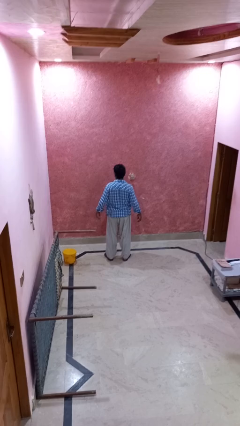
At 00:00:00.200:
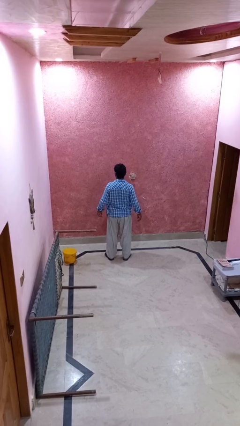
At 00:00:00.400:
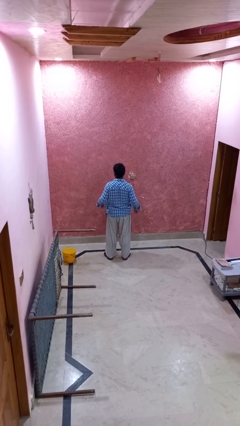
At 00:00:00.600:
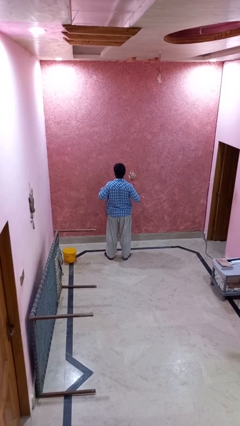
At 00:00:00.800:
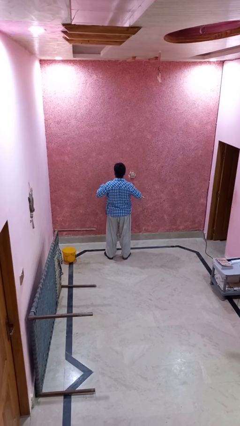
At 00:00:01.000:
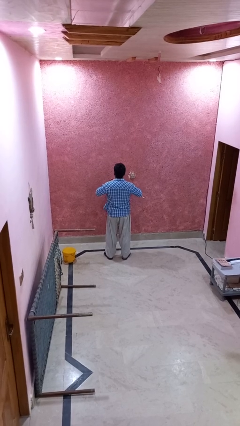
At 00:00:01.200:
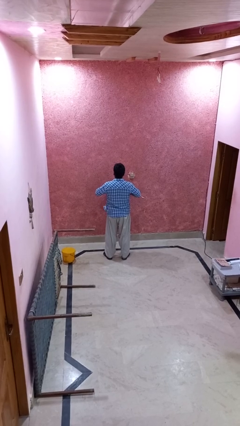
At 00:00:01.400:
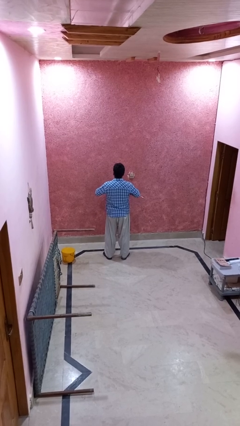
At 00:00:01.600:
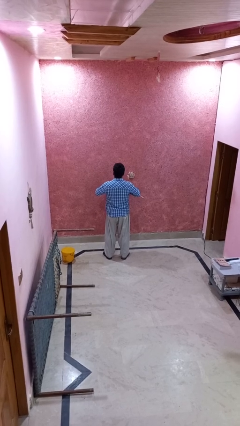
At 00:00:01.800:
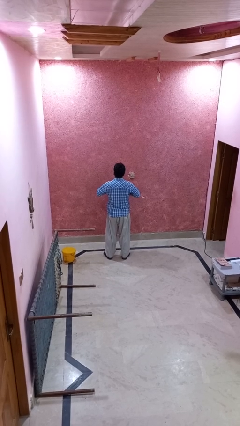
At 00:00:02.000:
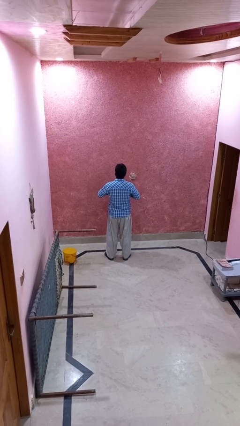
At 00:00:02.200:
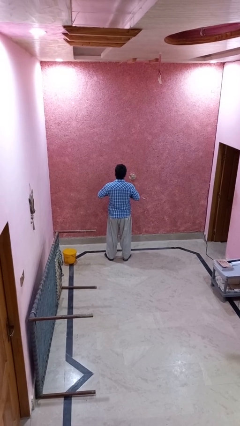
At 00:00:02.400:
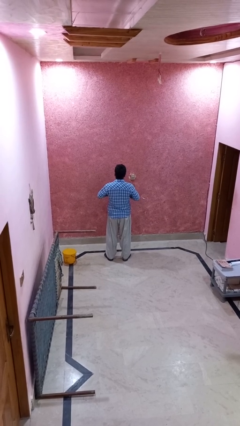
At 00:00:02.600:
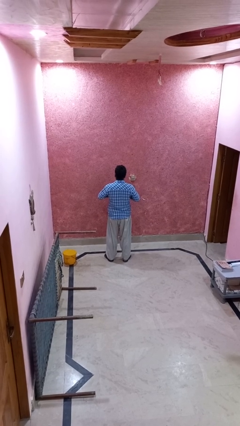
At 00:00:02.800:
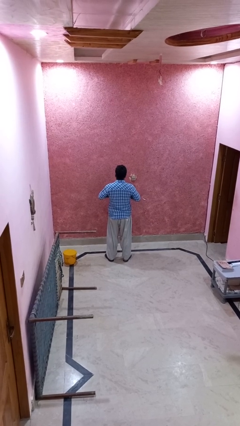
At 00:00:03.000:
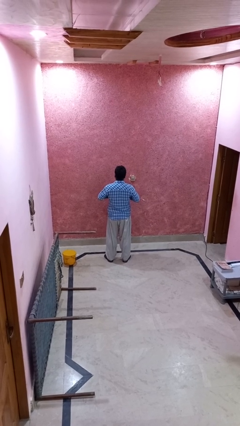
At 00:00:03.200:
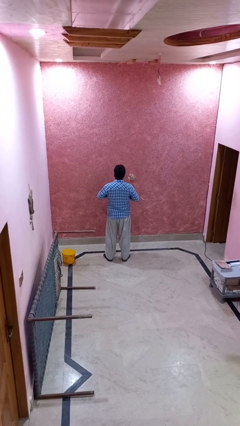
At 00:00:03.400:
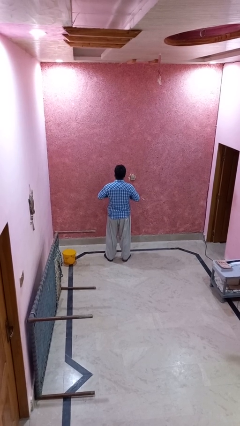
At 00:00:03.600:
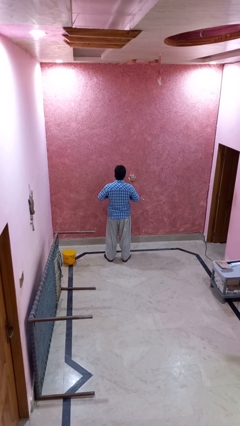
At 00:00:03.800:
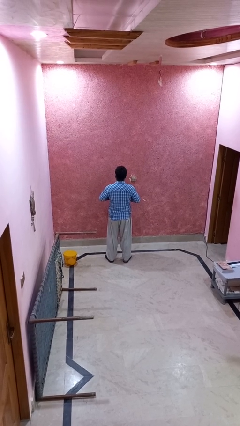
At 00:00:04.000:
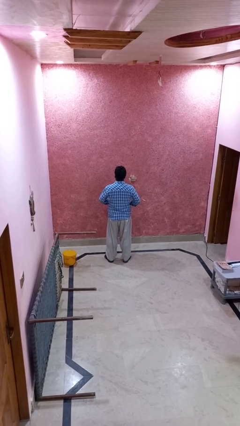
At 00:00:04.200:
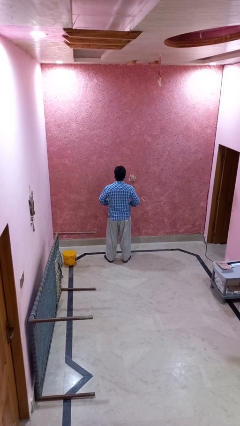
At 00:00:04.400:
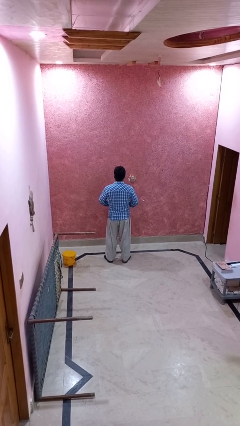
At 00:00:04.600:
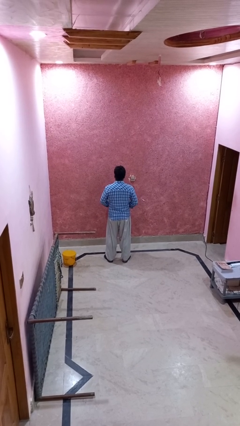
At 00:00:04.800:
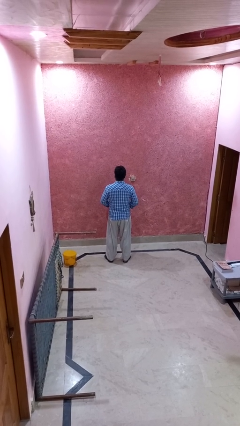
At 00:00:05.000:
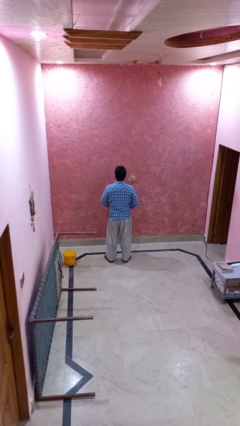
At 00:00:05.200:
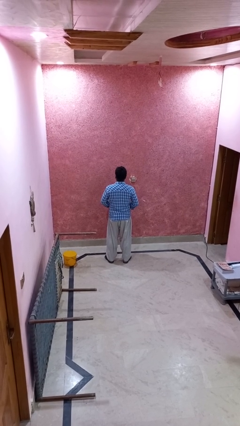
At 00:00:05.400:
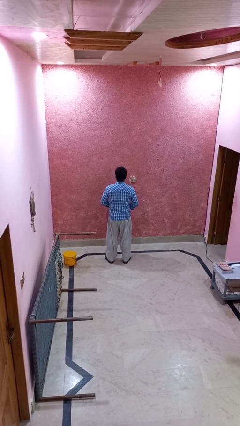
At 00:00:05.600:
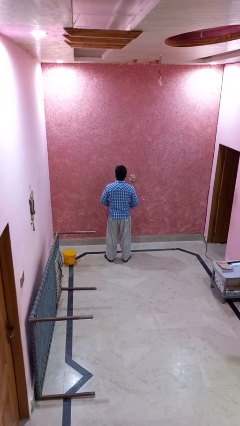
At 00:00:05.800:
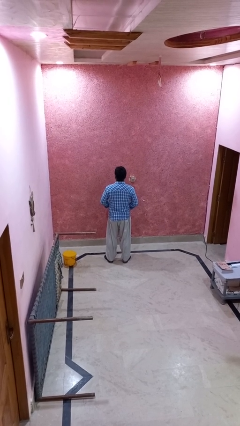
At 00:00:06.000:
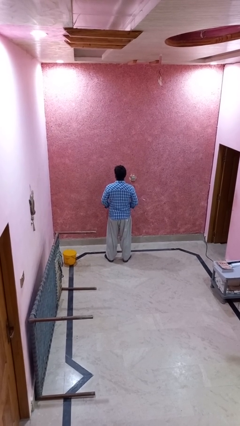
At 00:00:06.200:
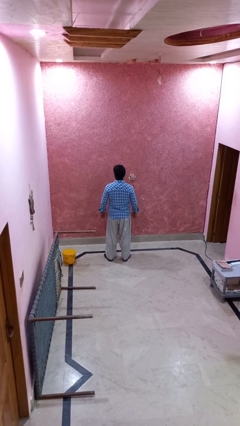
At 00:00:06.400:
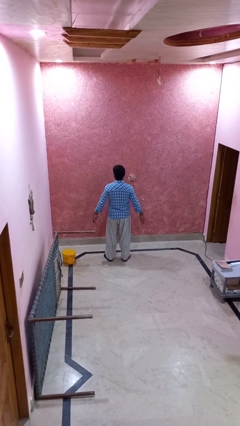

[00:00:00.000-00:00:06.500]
person buttons shirt

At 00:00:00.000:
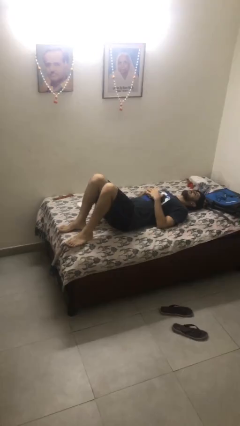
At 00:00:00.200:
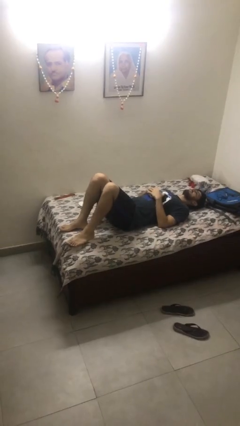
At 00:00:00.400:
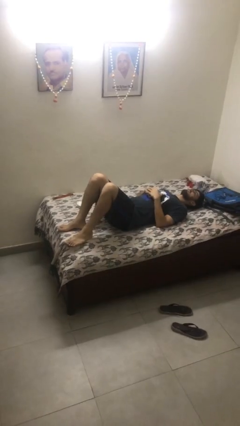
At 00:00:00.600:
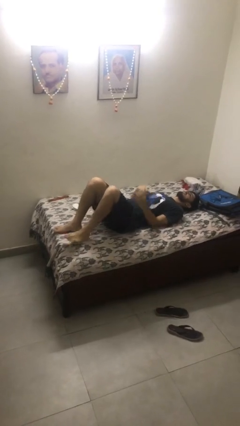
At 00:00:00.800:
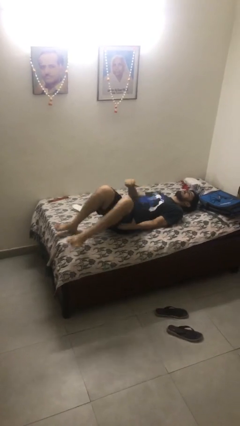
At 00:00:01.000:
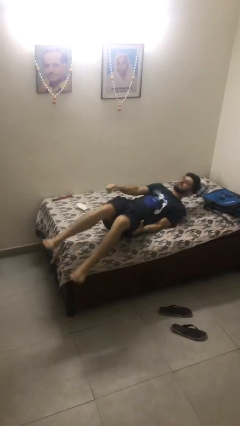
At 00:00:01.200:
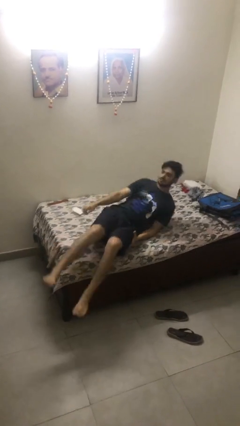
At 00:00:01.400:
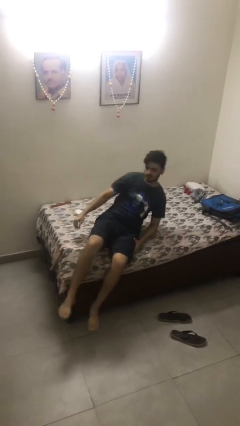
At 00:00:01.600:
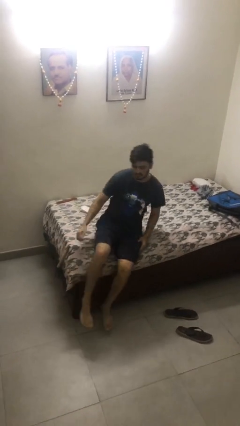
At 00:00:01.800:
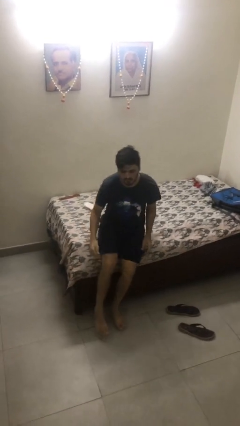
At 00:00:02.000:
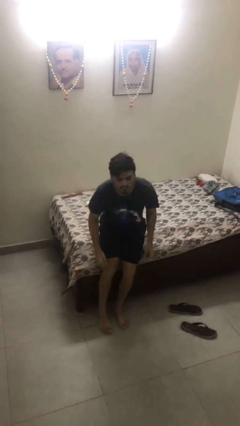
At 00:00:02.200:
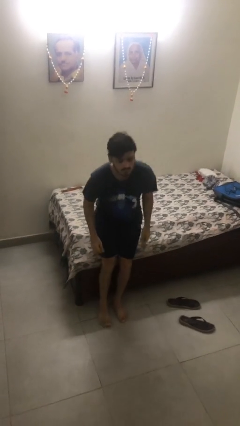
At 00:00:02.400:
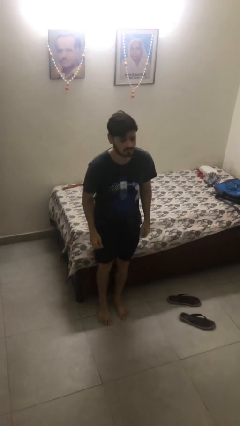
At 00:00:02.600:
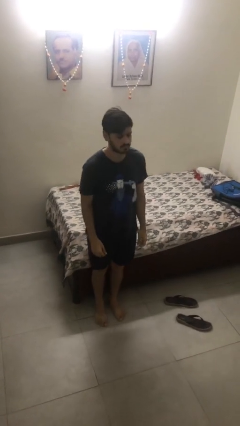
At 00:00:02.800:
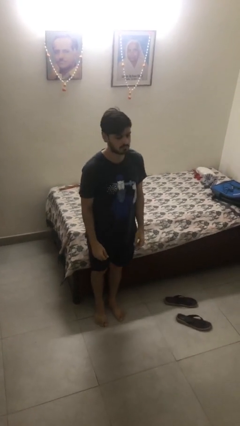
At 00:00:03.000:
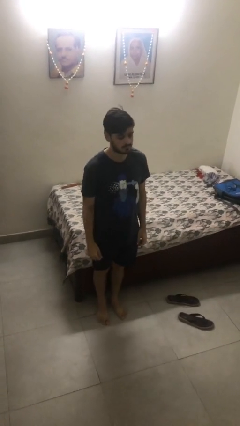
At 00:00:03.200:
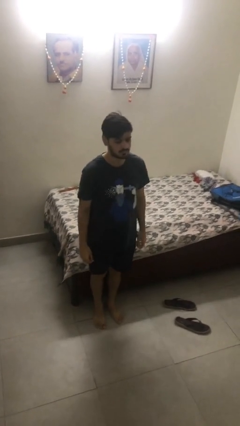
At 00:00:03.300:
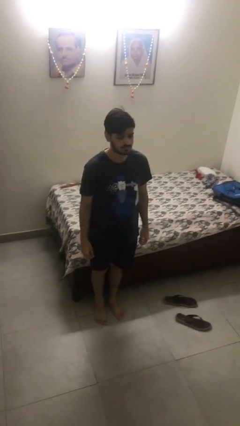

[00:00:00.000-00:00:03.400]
person stands up

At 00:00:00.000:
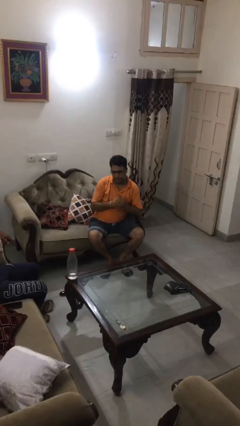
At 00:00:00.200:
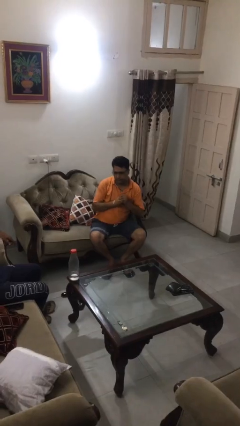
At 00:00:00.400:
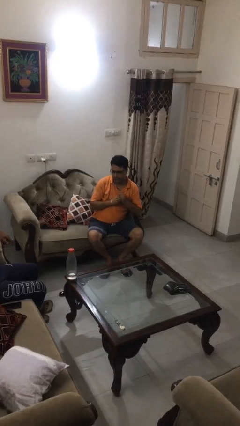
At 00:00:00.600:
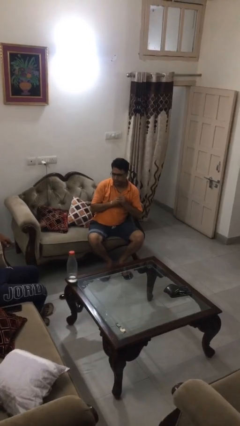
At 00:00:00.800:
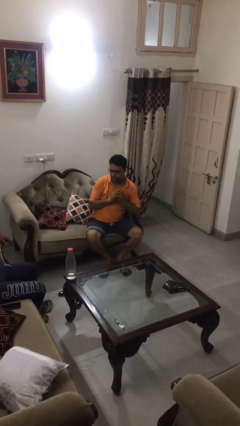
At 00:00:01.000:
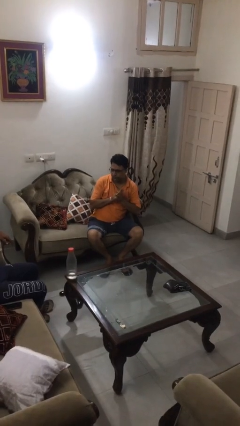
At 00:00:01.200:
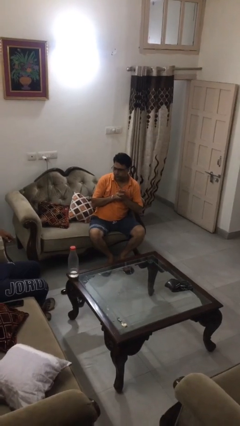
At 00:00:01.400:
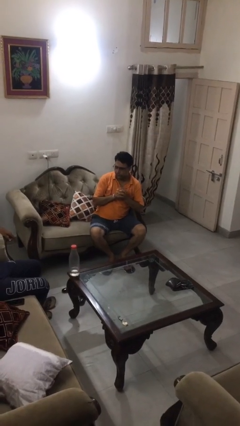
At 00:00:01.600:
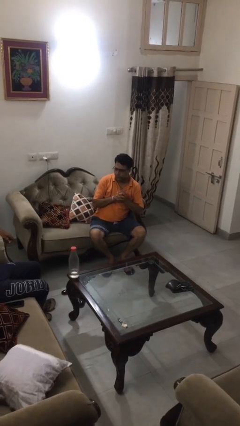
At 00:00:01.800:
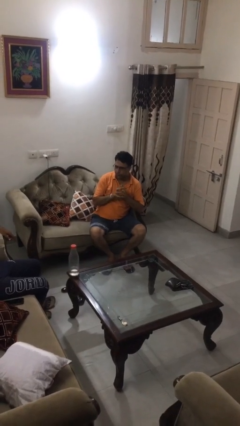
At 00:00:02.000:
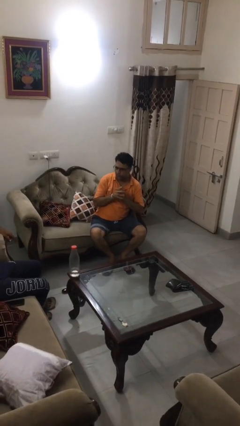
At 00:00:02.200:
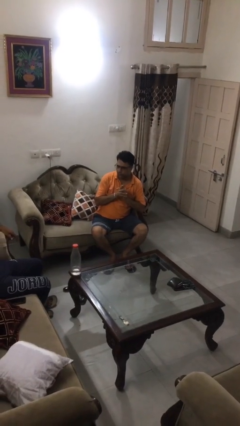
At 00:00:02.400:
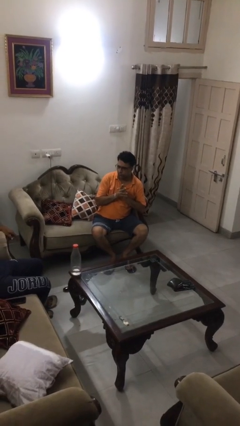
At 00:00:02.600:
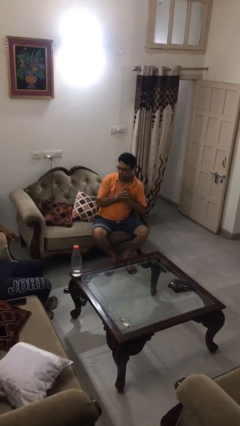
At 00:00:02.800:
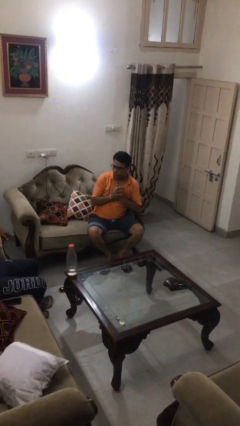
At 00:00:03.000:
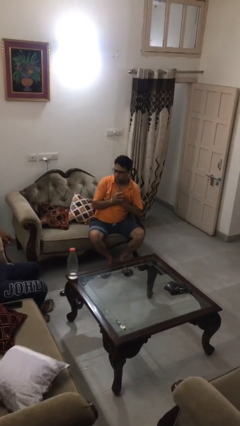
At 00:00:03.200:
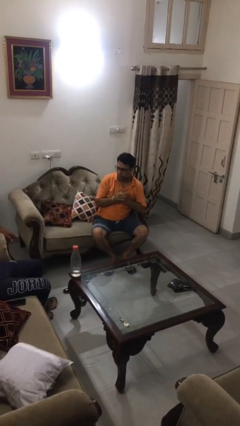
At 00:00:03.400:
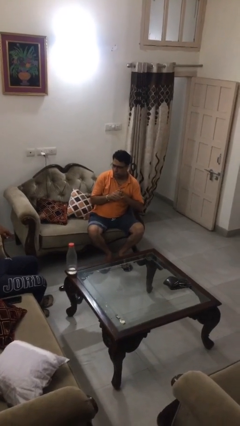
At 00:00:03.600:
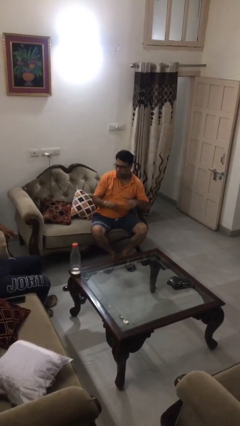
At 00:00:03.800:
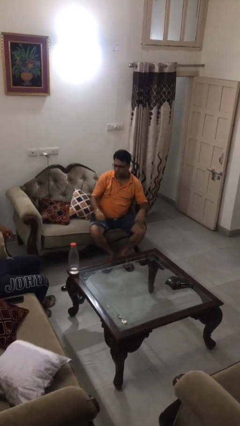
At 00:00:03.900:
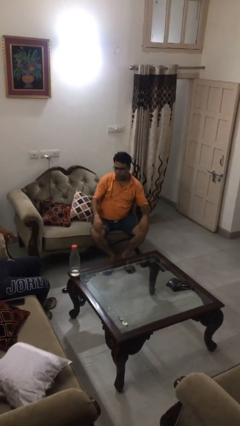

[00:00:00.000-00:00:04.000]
person cracks knuckles

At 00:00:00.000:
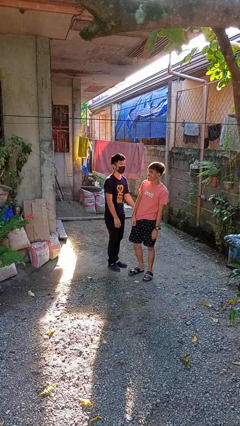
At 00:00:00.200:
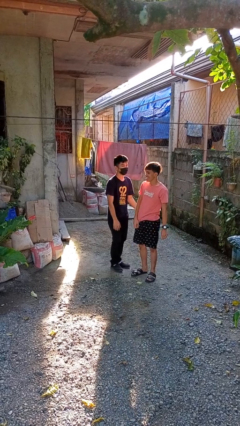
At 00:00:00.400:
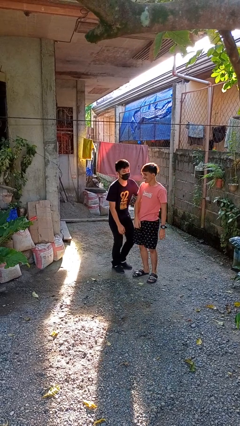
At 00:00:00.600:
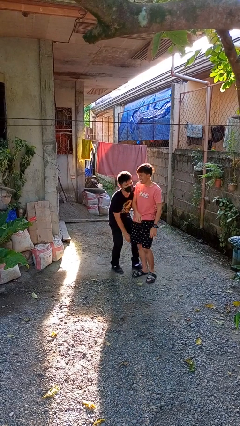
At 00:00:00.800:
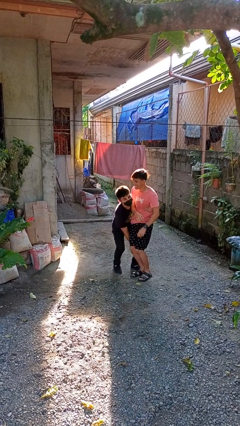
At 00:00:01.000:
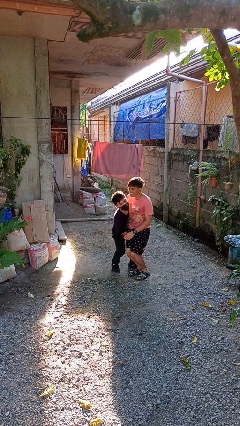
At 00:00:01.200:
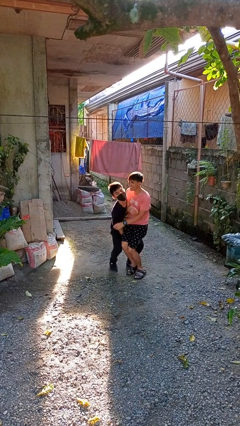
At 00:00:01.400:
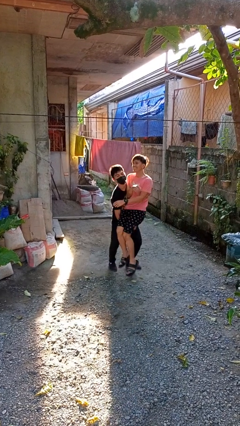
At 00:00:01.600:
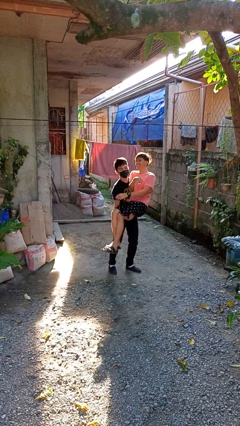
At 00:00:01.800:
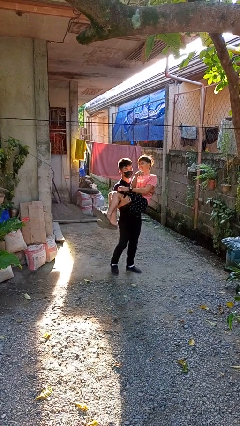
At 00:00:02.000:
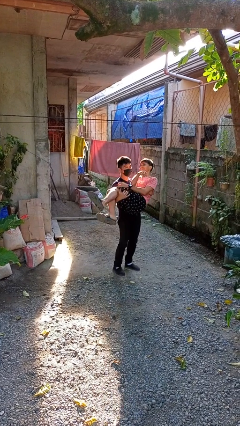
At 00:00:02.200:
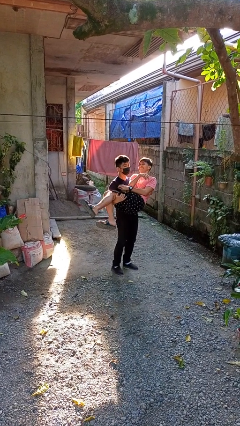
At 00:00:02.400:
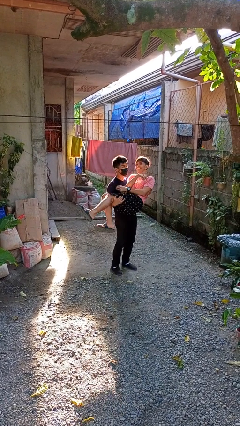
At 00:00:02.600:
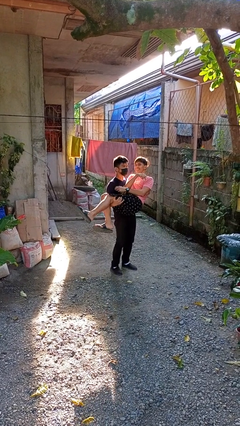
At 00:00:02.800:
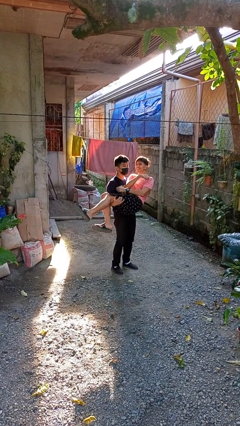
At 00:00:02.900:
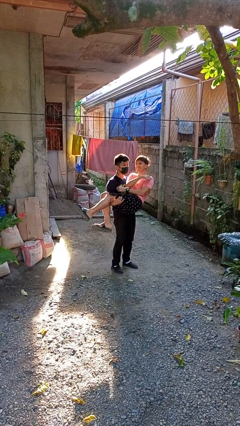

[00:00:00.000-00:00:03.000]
person picks up person

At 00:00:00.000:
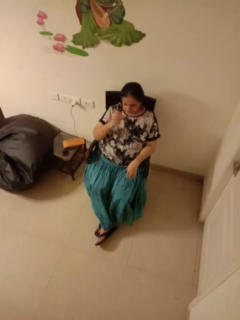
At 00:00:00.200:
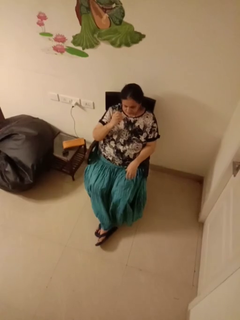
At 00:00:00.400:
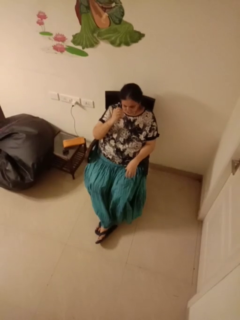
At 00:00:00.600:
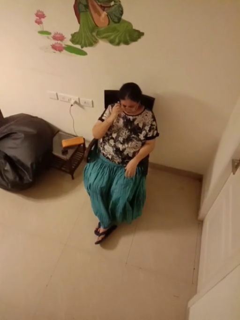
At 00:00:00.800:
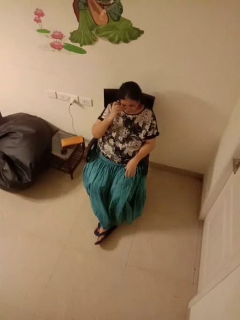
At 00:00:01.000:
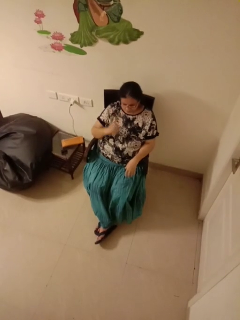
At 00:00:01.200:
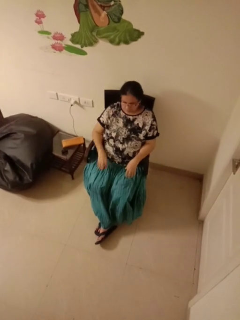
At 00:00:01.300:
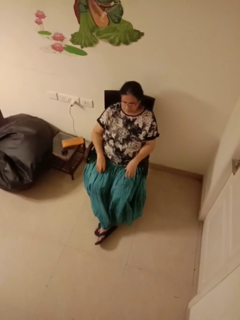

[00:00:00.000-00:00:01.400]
person puts on glasses
